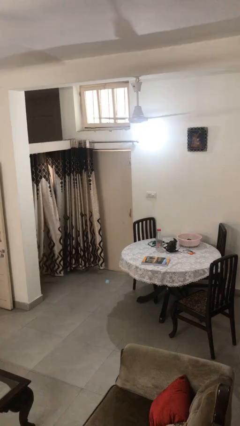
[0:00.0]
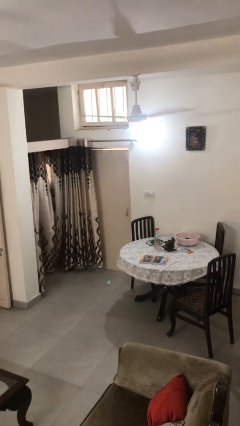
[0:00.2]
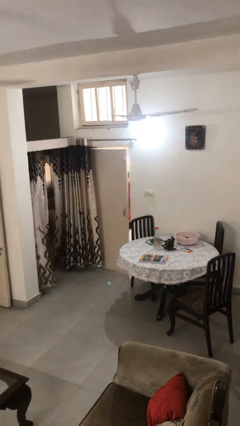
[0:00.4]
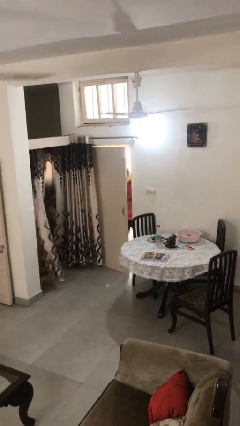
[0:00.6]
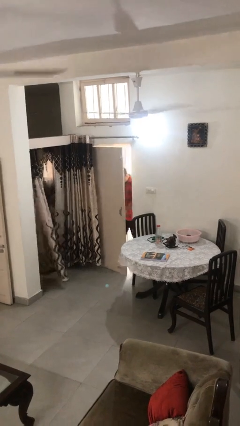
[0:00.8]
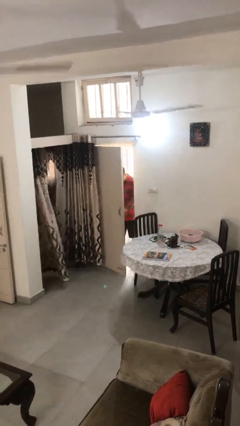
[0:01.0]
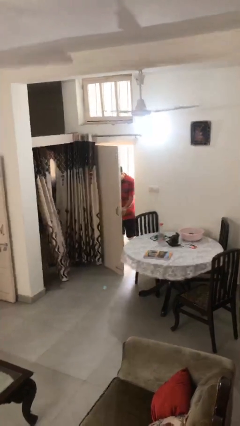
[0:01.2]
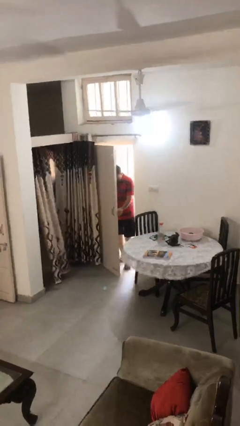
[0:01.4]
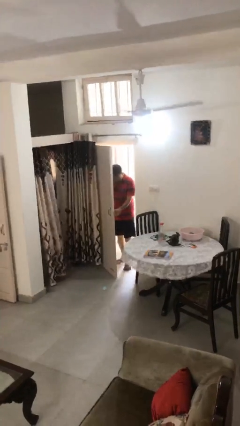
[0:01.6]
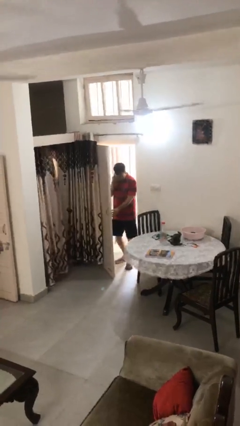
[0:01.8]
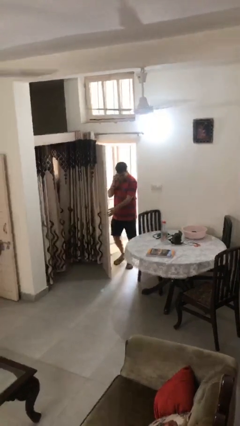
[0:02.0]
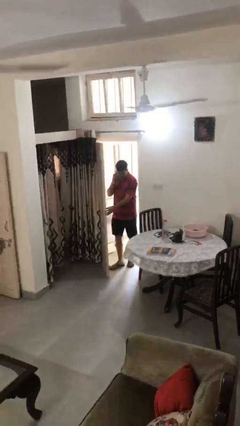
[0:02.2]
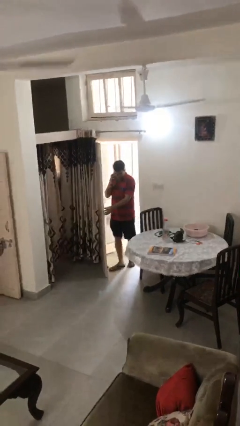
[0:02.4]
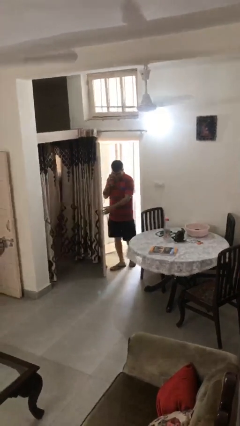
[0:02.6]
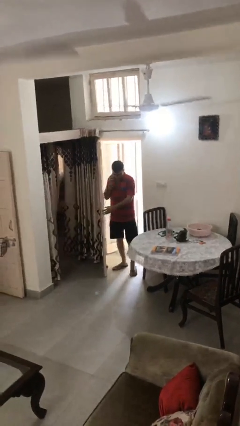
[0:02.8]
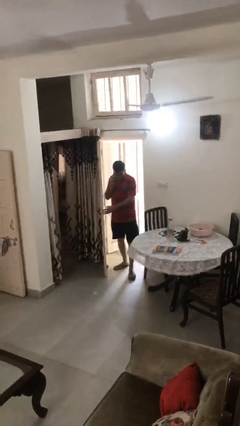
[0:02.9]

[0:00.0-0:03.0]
person opens facility door

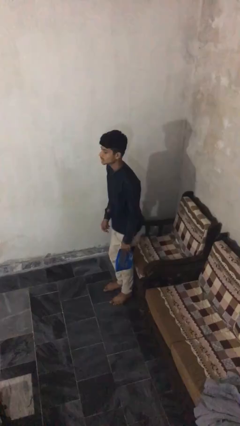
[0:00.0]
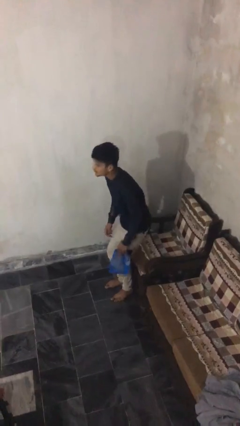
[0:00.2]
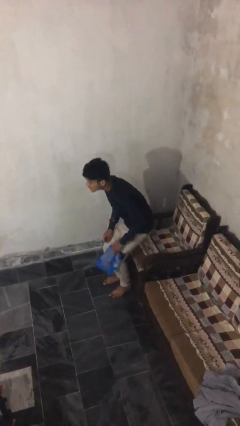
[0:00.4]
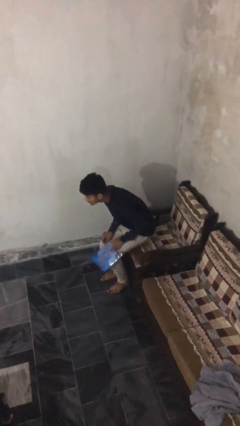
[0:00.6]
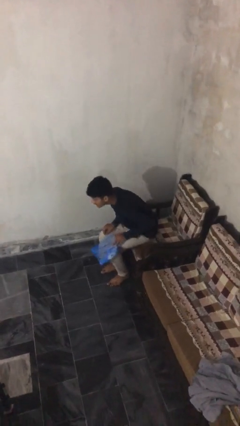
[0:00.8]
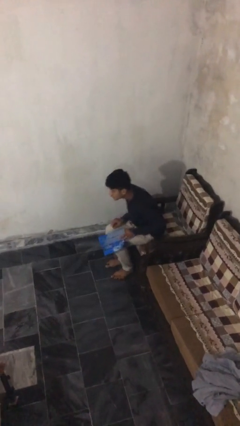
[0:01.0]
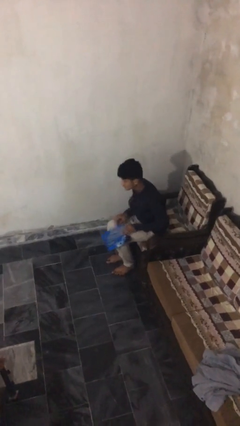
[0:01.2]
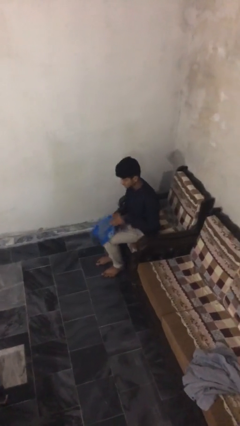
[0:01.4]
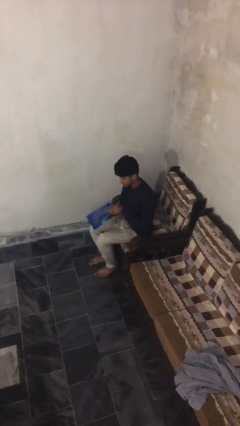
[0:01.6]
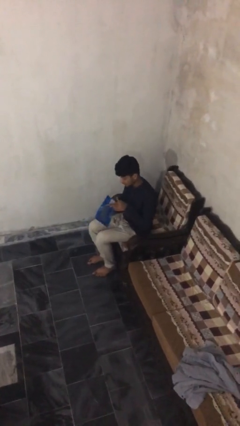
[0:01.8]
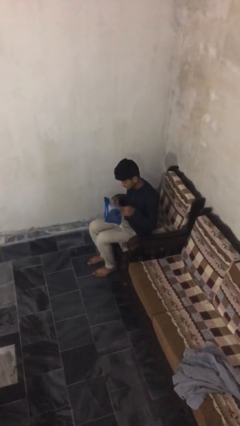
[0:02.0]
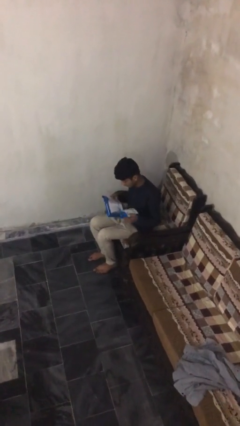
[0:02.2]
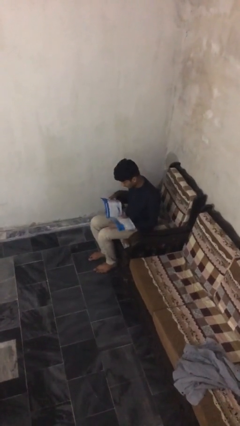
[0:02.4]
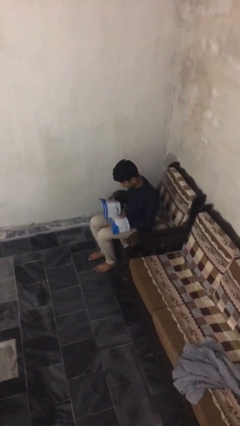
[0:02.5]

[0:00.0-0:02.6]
person sits down

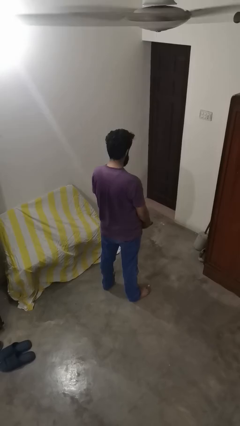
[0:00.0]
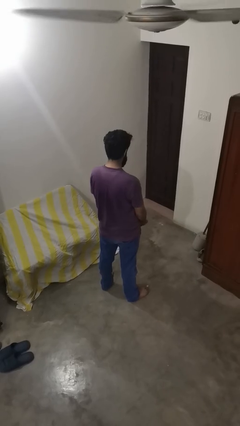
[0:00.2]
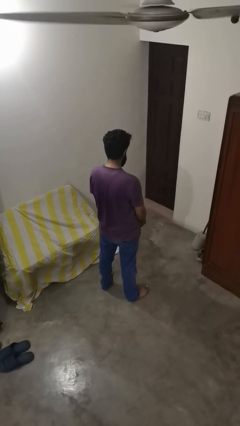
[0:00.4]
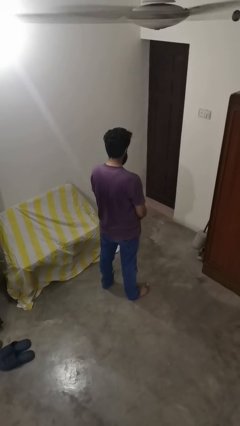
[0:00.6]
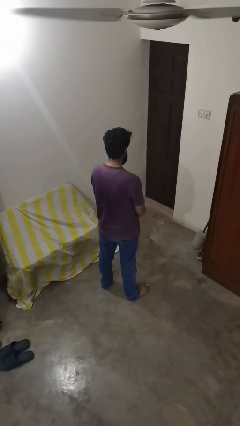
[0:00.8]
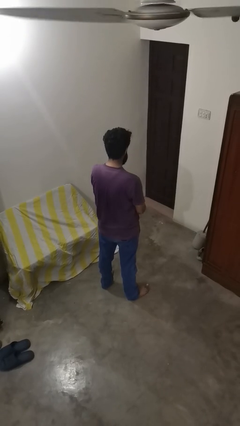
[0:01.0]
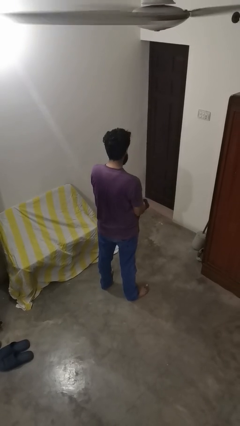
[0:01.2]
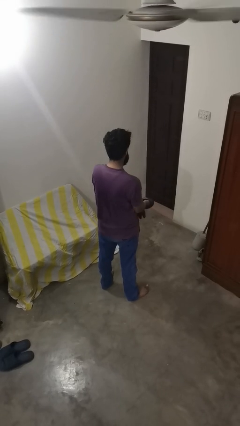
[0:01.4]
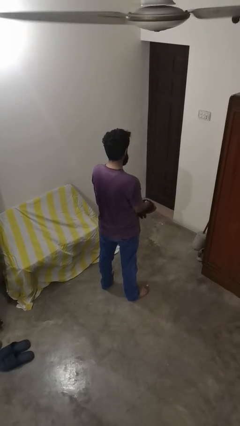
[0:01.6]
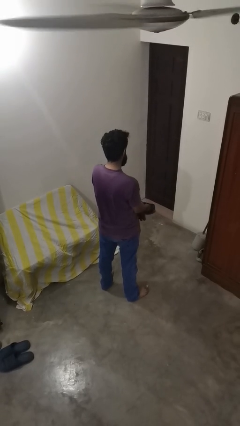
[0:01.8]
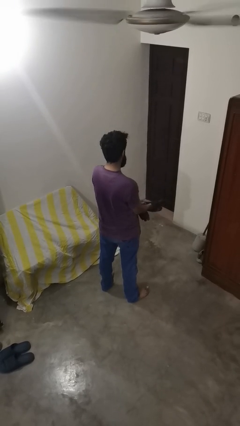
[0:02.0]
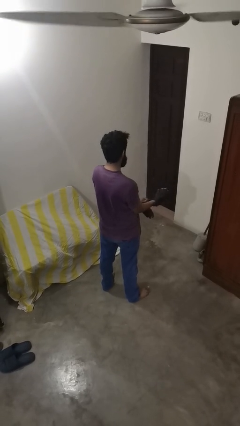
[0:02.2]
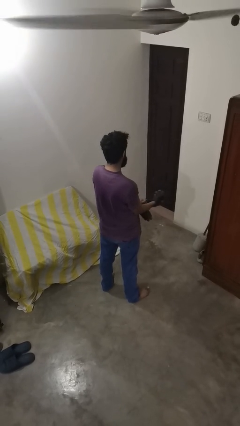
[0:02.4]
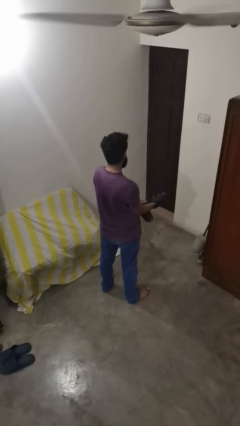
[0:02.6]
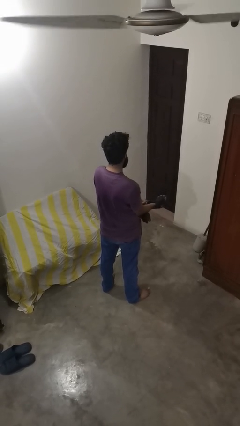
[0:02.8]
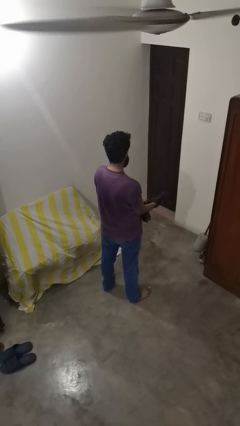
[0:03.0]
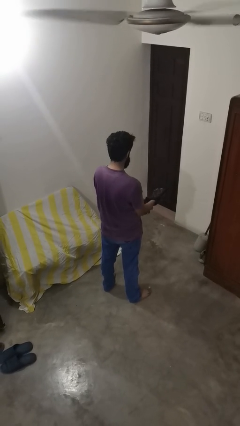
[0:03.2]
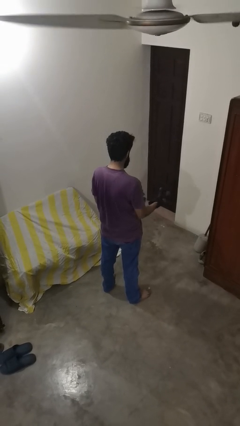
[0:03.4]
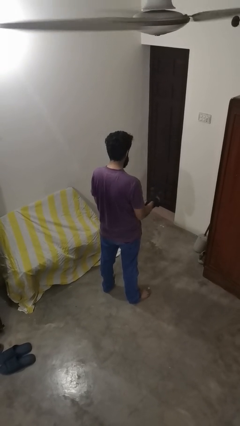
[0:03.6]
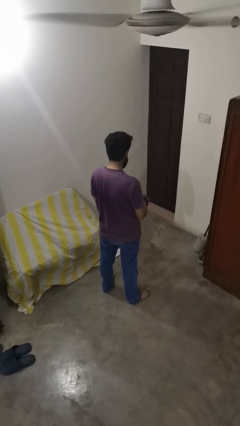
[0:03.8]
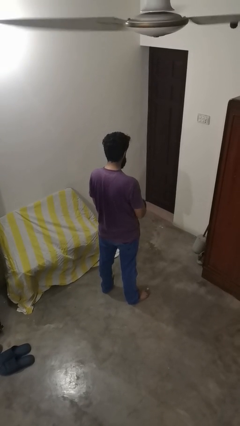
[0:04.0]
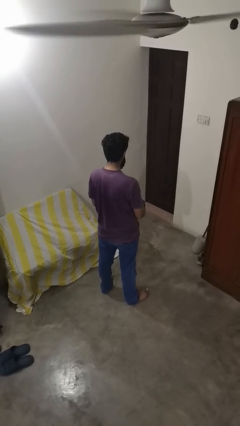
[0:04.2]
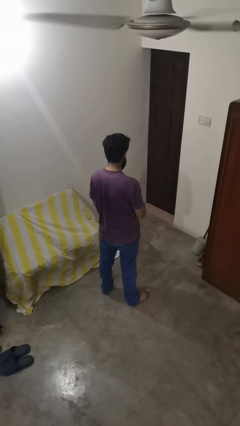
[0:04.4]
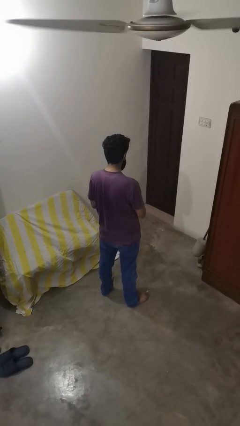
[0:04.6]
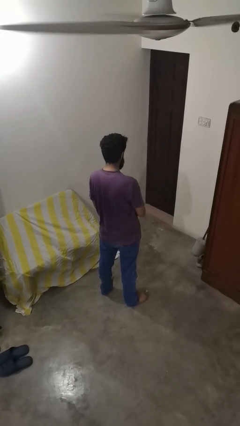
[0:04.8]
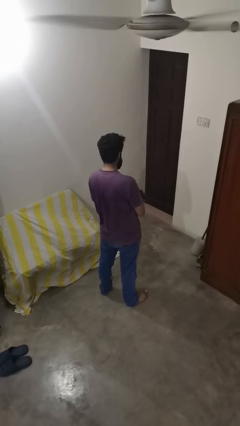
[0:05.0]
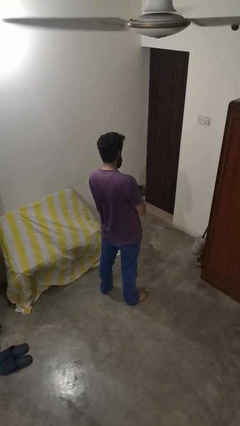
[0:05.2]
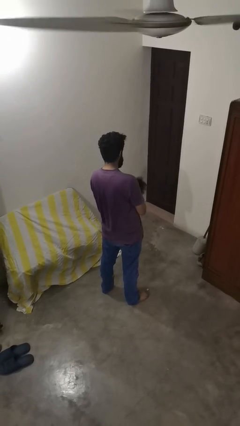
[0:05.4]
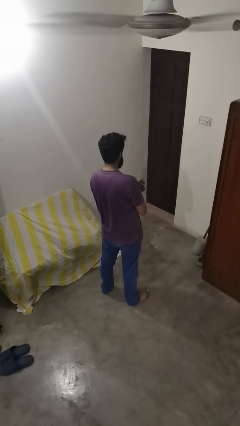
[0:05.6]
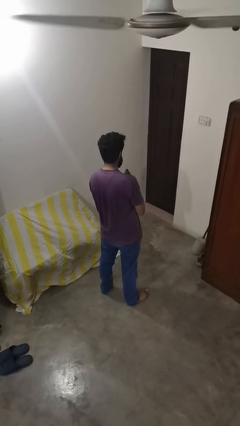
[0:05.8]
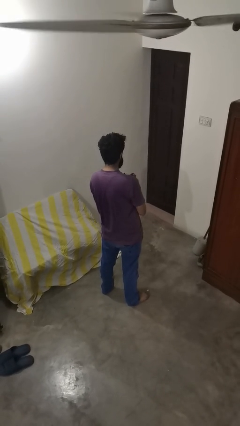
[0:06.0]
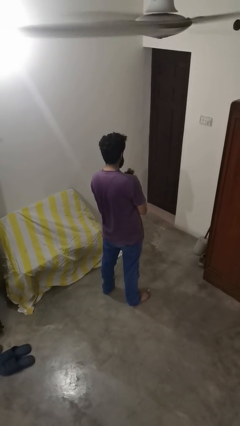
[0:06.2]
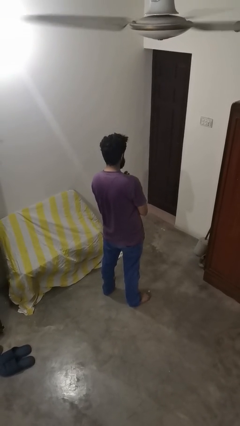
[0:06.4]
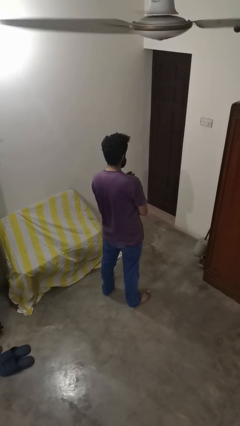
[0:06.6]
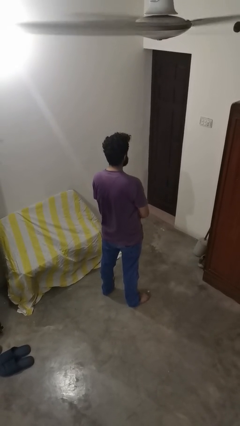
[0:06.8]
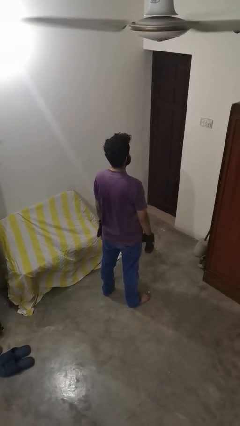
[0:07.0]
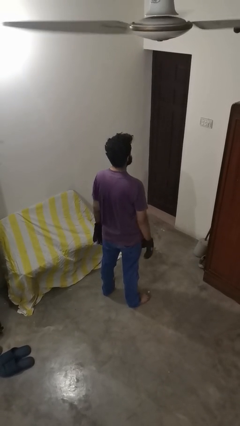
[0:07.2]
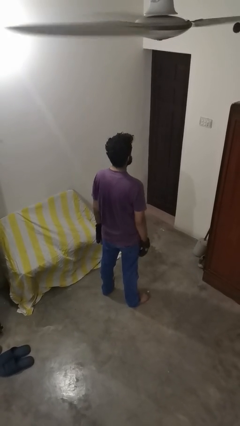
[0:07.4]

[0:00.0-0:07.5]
person puts on gloves

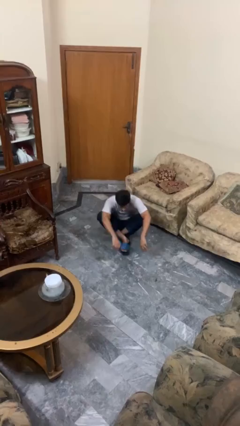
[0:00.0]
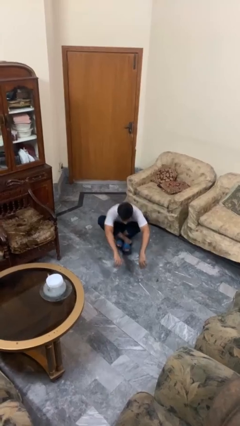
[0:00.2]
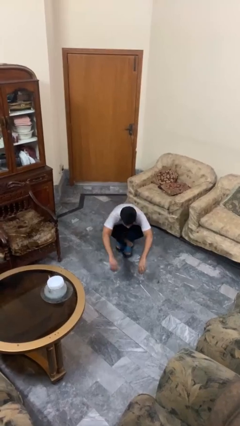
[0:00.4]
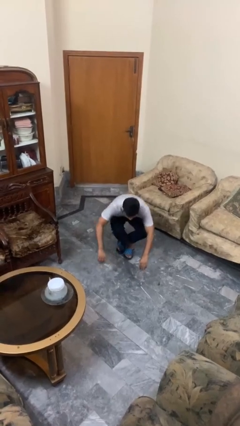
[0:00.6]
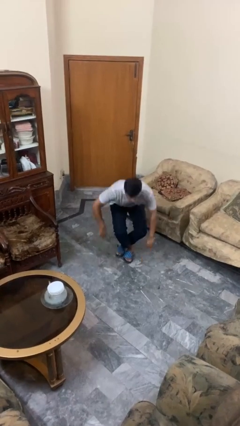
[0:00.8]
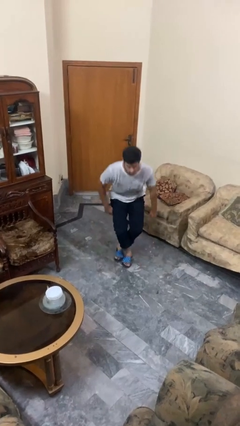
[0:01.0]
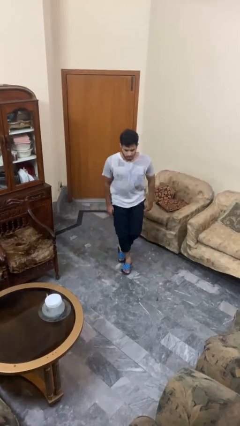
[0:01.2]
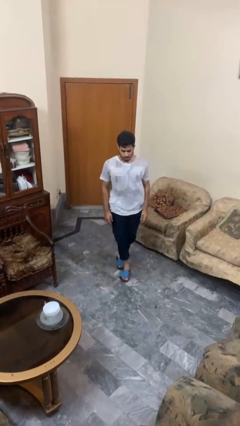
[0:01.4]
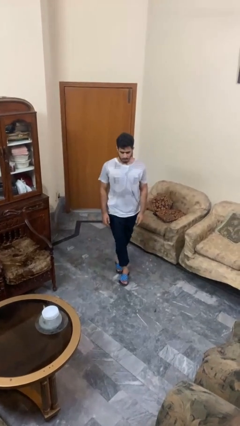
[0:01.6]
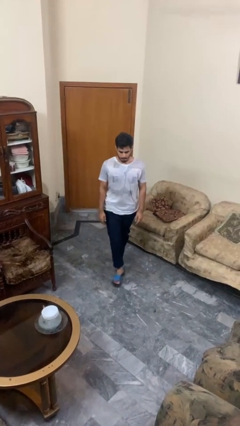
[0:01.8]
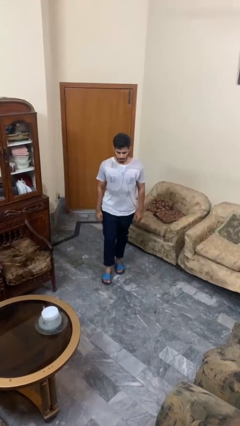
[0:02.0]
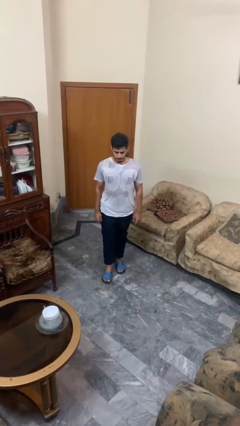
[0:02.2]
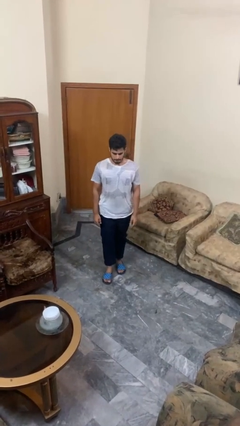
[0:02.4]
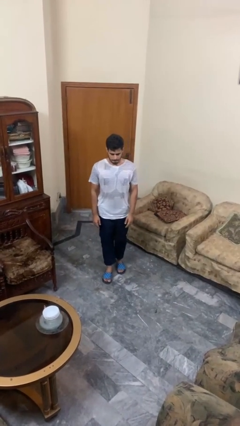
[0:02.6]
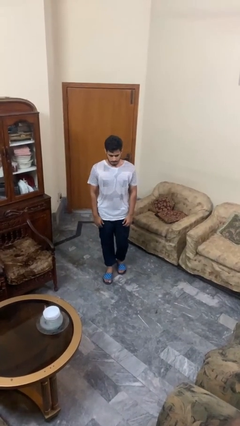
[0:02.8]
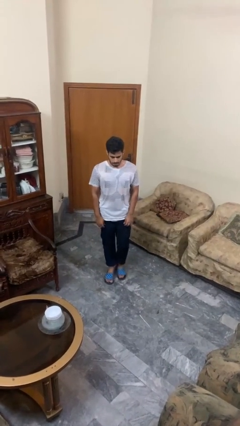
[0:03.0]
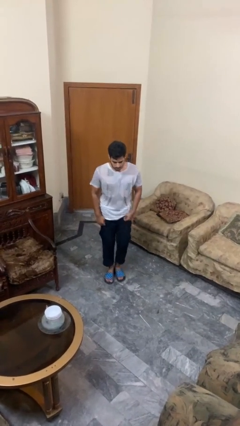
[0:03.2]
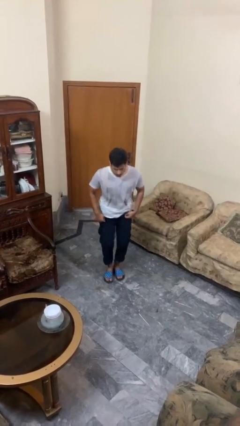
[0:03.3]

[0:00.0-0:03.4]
person stands up from floor

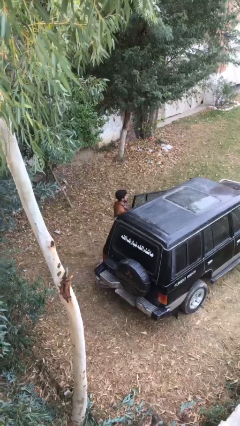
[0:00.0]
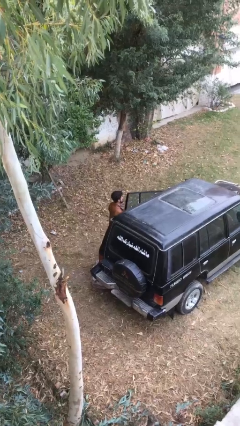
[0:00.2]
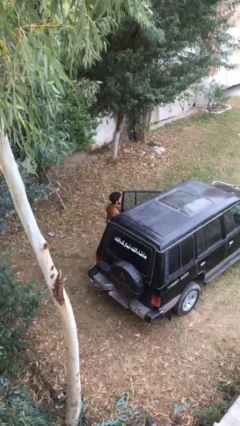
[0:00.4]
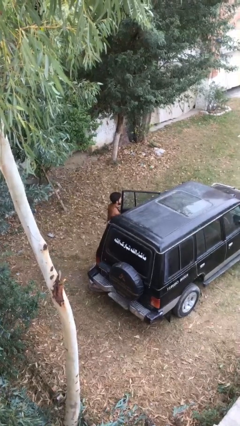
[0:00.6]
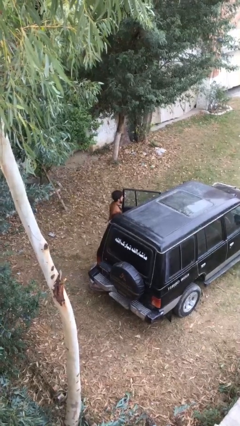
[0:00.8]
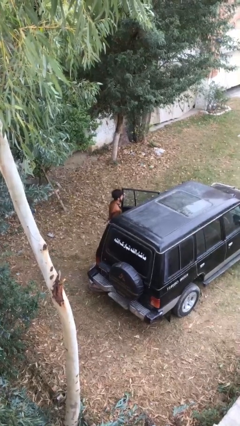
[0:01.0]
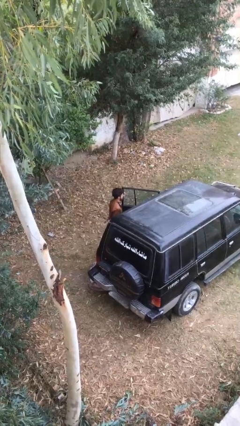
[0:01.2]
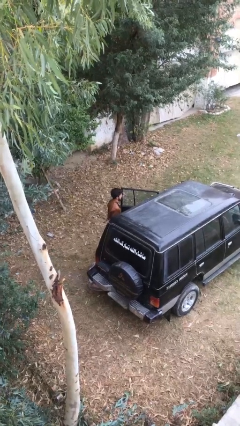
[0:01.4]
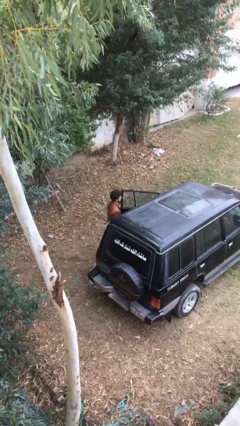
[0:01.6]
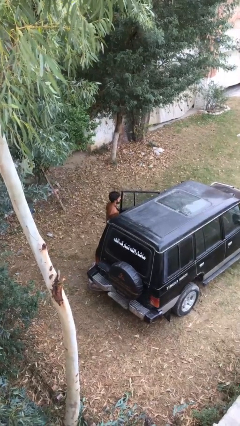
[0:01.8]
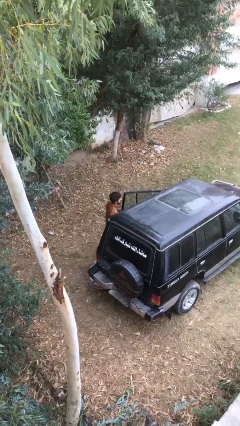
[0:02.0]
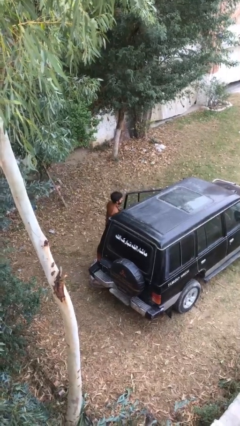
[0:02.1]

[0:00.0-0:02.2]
person opens car door
